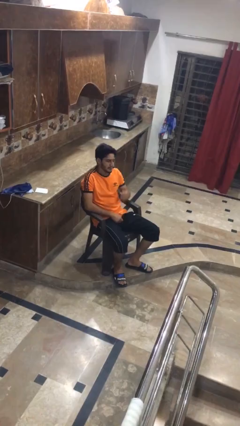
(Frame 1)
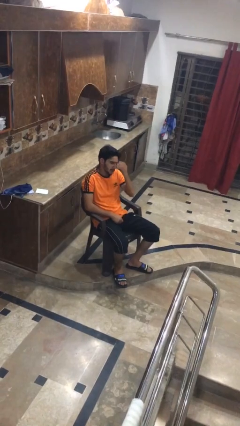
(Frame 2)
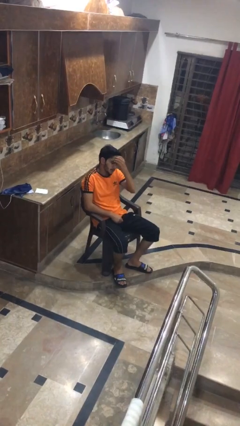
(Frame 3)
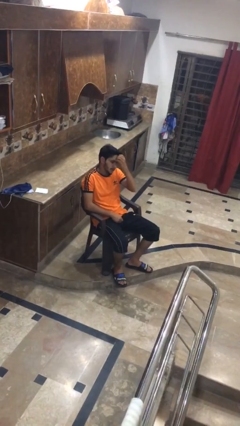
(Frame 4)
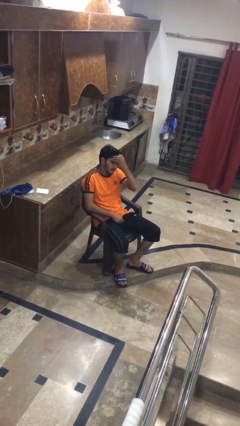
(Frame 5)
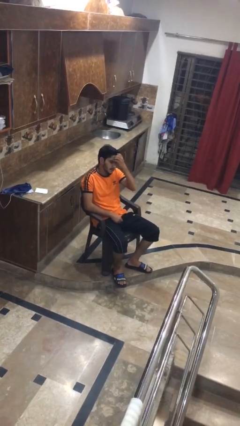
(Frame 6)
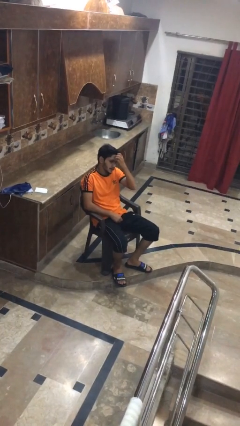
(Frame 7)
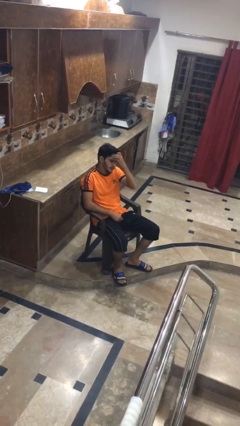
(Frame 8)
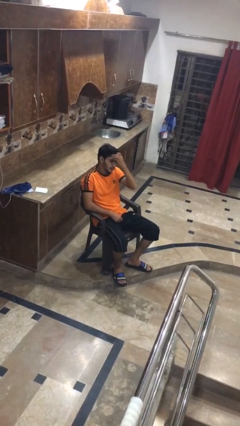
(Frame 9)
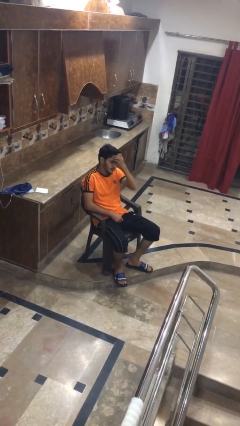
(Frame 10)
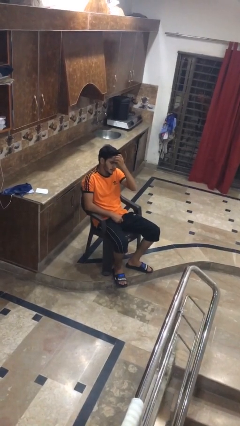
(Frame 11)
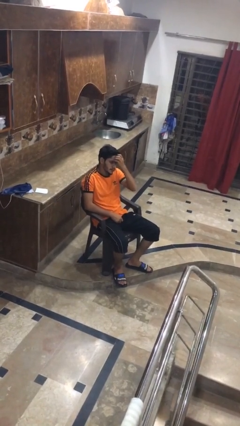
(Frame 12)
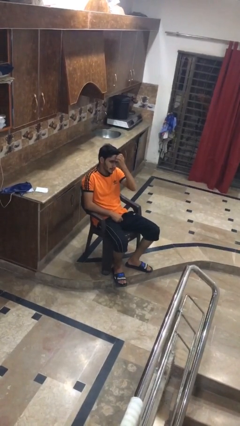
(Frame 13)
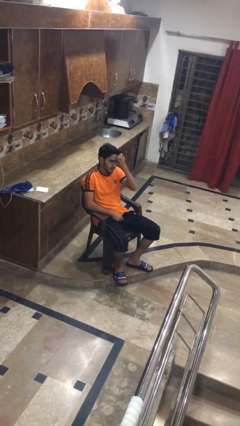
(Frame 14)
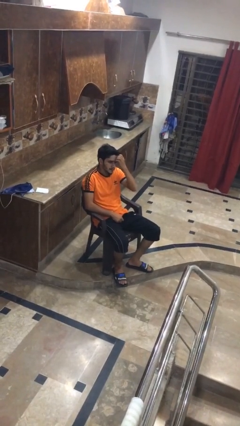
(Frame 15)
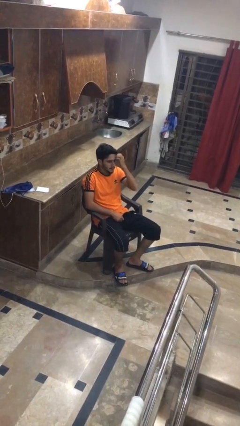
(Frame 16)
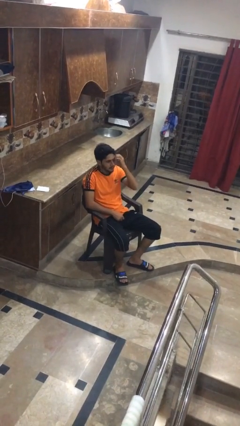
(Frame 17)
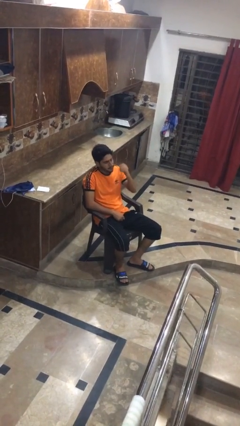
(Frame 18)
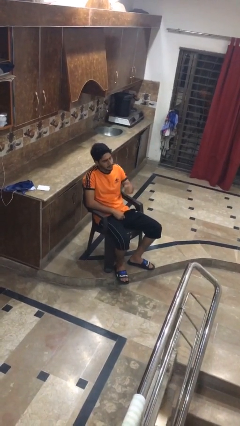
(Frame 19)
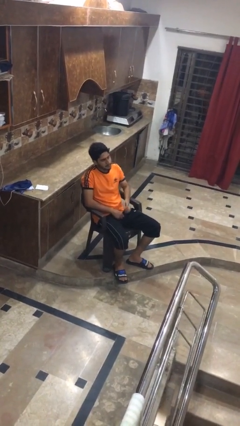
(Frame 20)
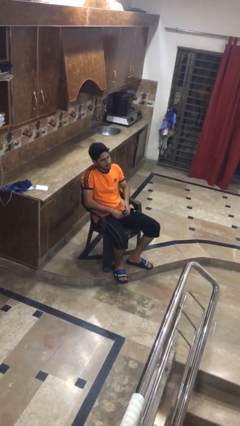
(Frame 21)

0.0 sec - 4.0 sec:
person scratches face

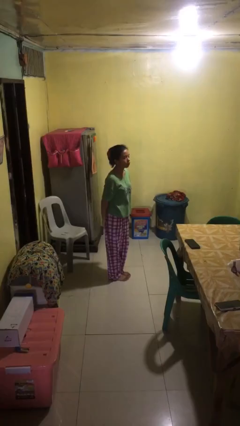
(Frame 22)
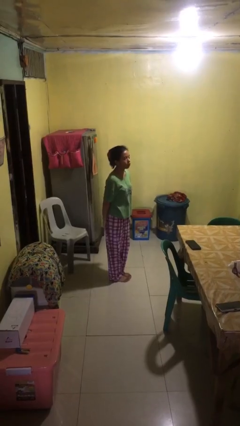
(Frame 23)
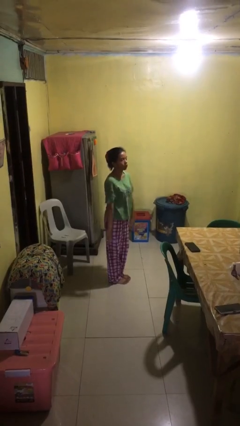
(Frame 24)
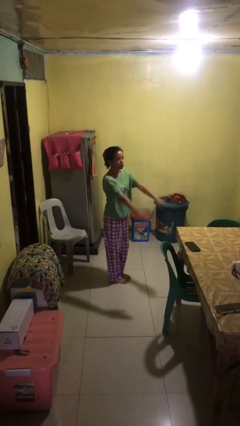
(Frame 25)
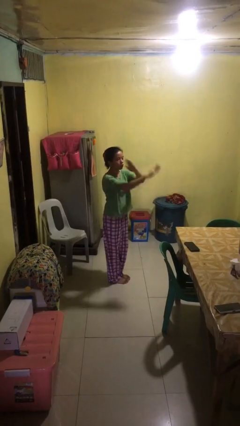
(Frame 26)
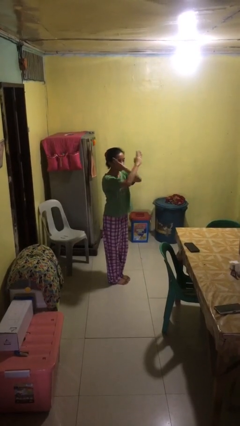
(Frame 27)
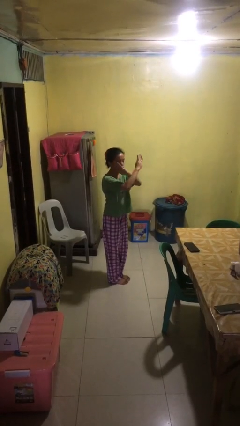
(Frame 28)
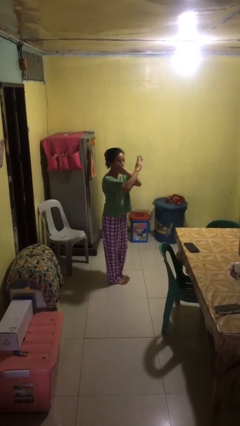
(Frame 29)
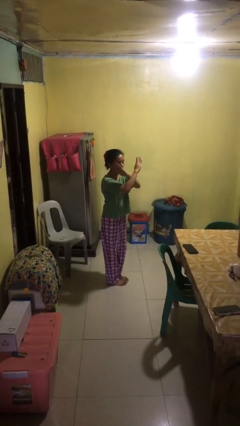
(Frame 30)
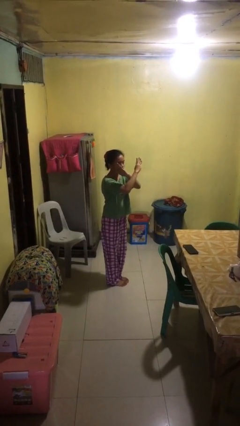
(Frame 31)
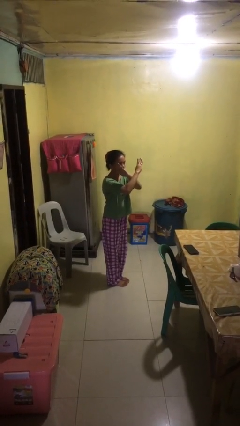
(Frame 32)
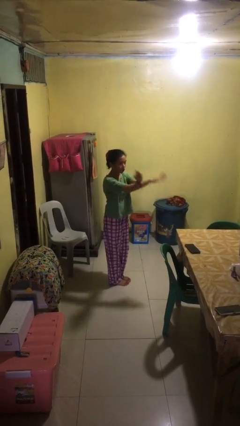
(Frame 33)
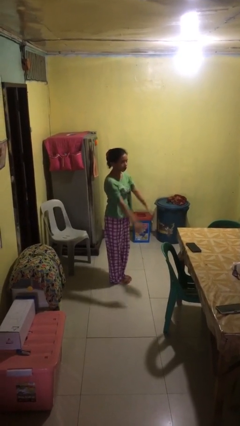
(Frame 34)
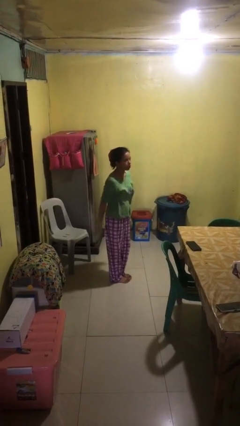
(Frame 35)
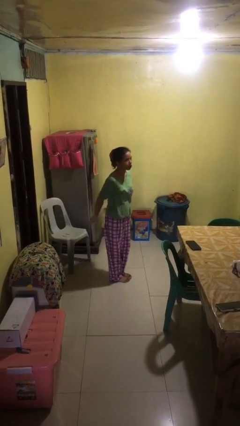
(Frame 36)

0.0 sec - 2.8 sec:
person gestures arms x

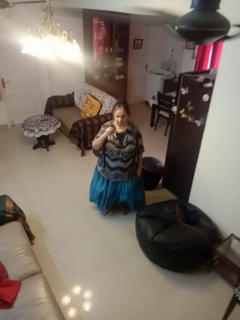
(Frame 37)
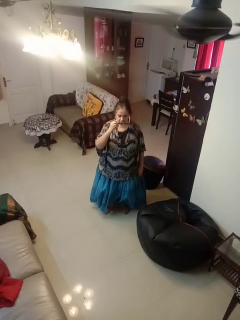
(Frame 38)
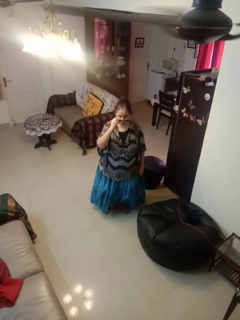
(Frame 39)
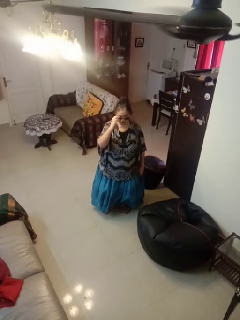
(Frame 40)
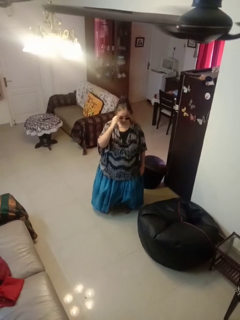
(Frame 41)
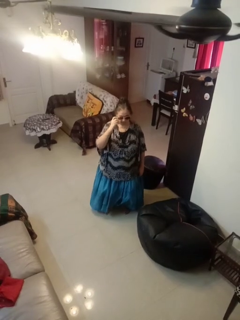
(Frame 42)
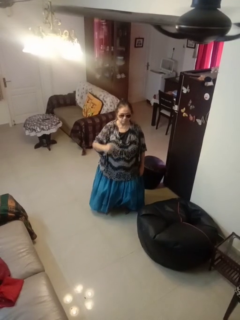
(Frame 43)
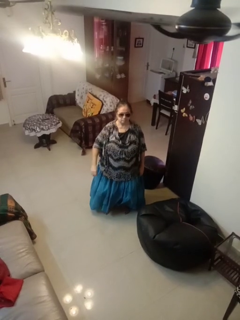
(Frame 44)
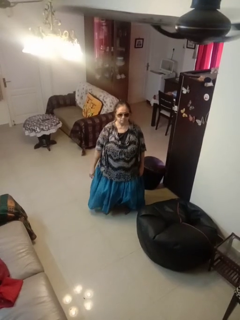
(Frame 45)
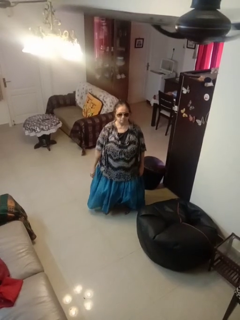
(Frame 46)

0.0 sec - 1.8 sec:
person puts on sunglasses

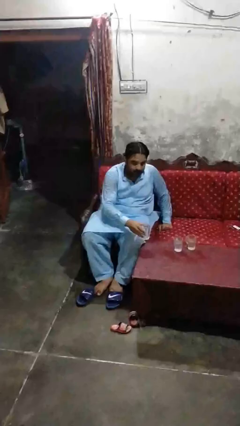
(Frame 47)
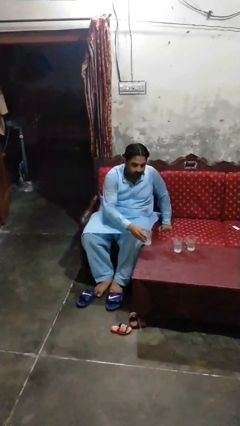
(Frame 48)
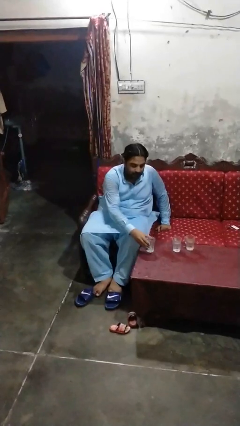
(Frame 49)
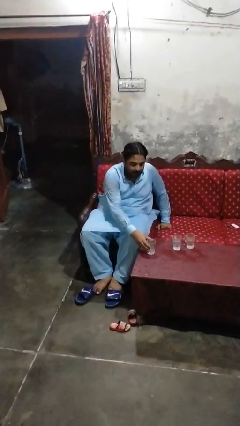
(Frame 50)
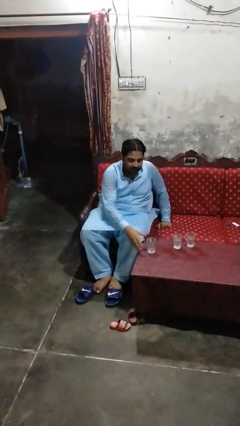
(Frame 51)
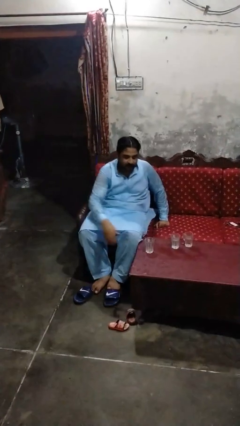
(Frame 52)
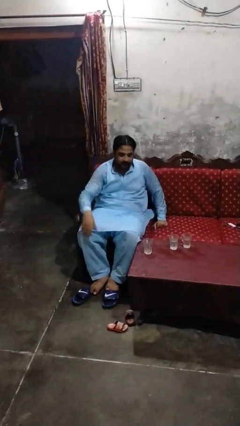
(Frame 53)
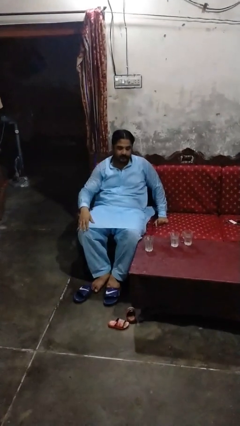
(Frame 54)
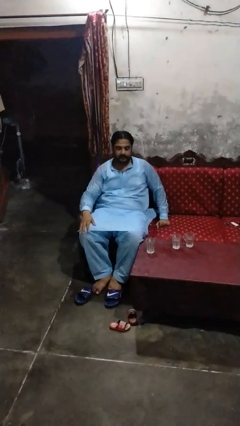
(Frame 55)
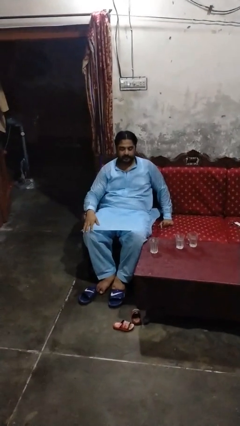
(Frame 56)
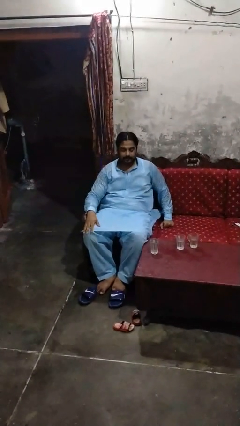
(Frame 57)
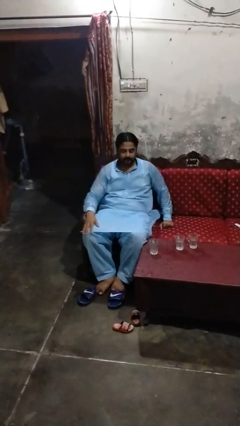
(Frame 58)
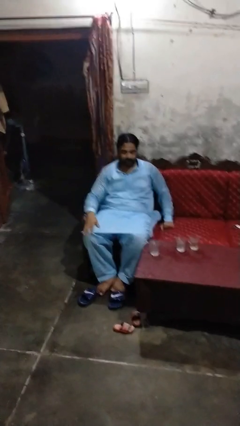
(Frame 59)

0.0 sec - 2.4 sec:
person puts down object on table

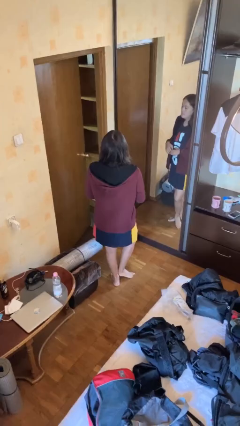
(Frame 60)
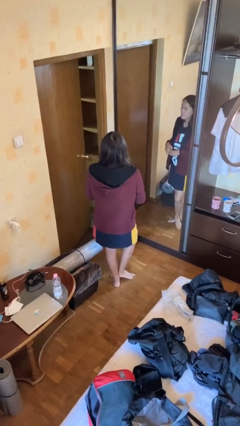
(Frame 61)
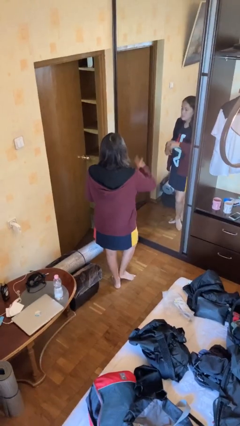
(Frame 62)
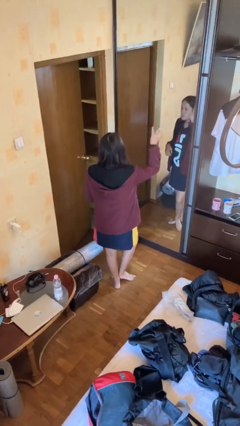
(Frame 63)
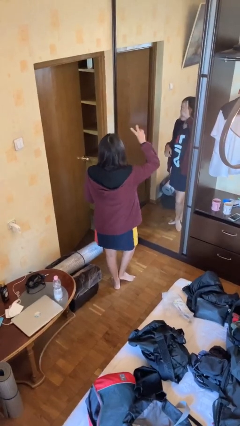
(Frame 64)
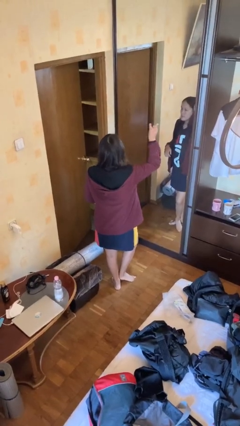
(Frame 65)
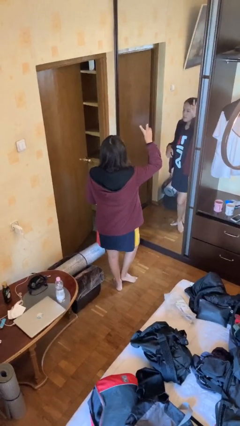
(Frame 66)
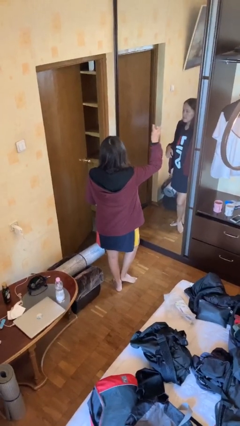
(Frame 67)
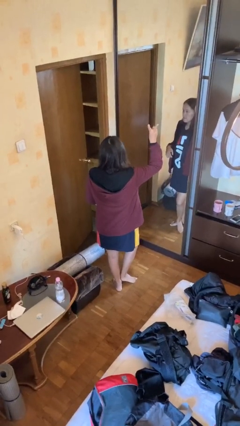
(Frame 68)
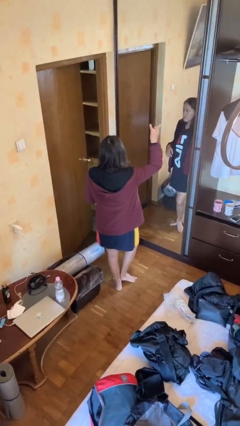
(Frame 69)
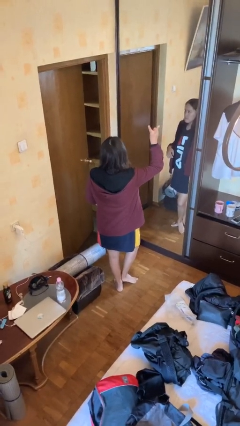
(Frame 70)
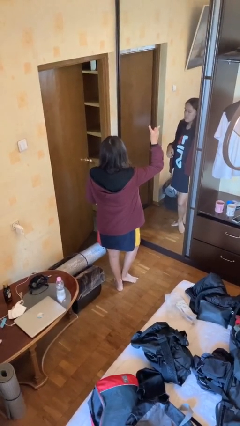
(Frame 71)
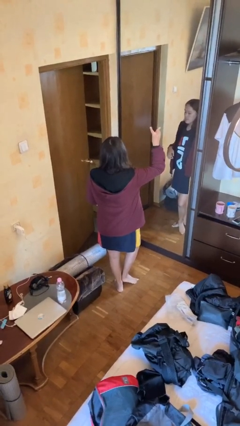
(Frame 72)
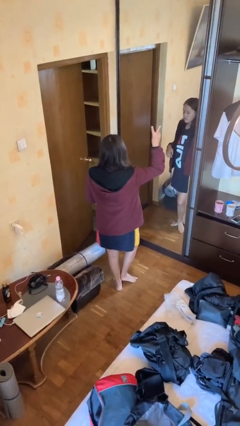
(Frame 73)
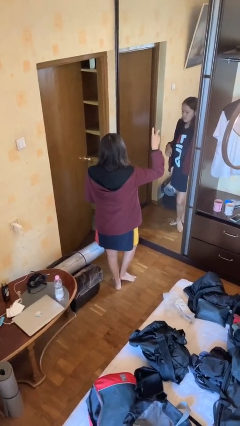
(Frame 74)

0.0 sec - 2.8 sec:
person gestures peace

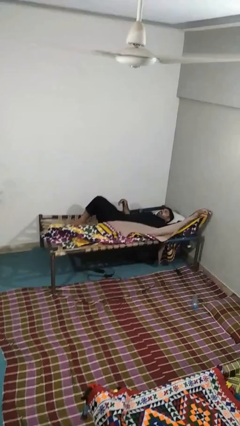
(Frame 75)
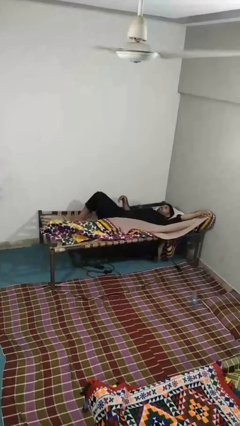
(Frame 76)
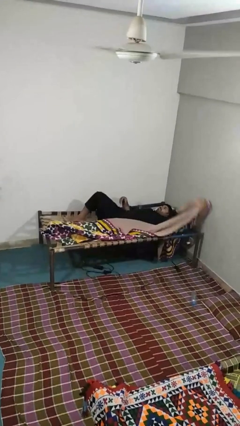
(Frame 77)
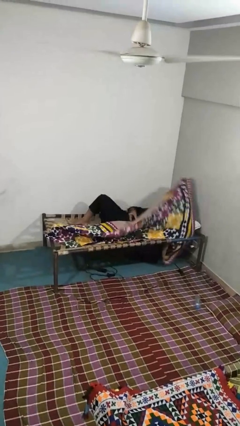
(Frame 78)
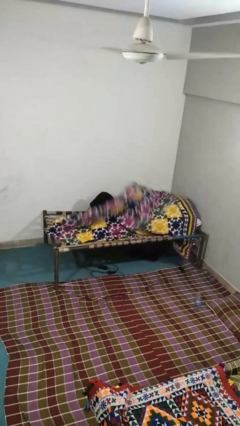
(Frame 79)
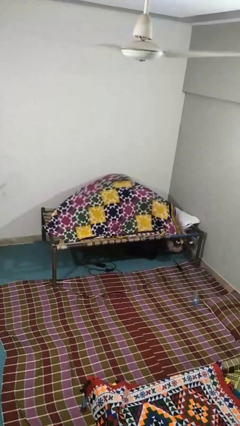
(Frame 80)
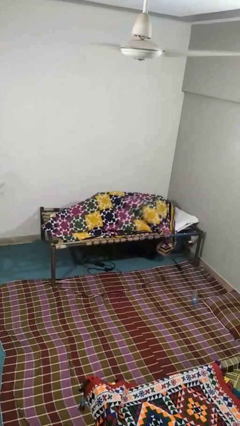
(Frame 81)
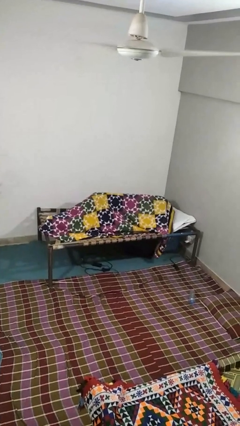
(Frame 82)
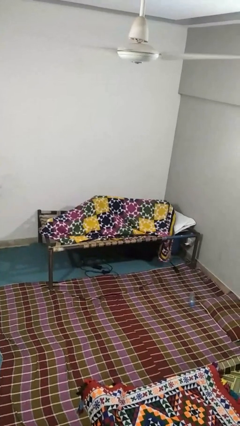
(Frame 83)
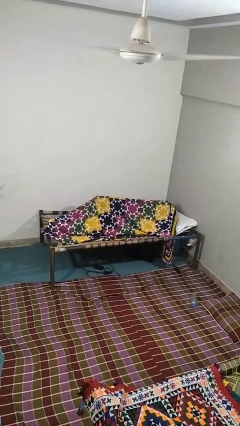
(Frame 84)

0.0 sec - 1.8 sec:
person covers with blanket

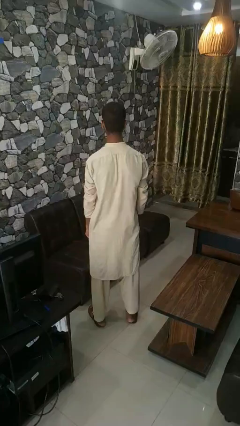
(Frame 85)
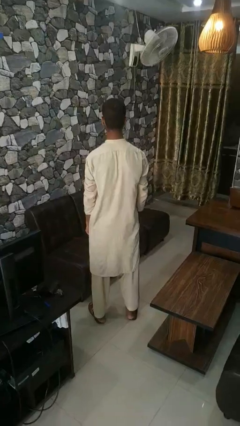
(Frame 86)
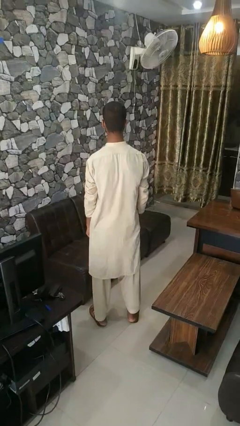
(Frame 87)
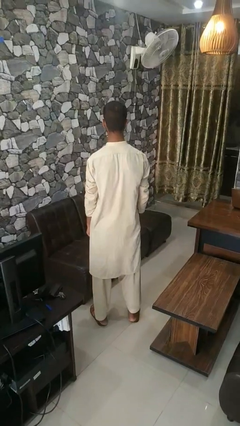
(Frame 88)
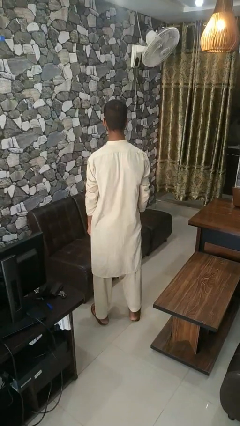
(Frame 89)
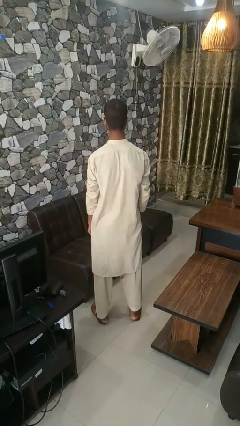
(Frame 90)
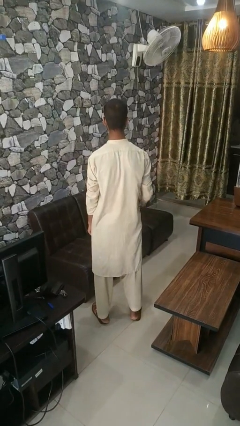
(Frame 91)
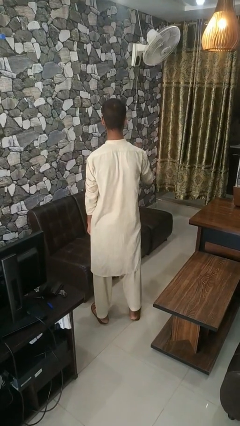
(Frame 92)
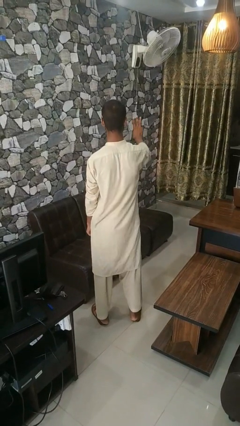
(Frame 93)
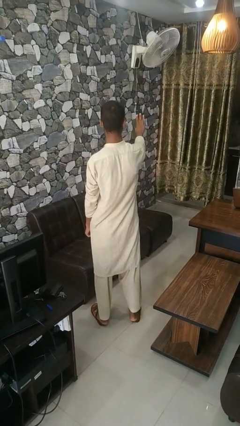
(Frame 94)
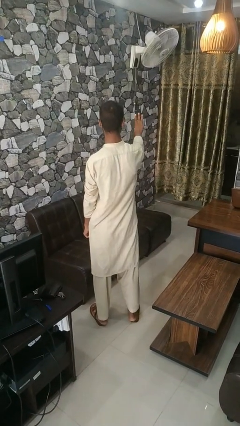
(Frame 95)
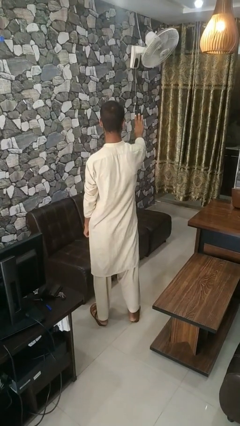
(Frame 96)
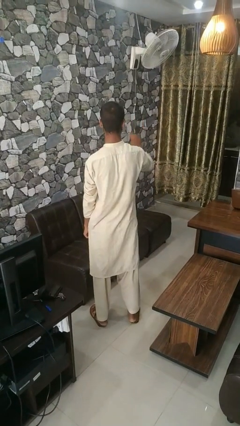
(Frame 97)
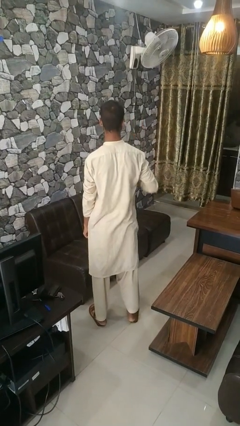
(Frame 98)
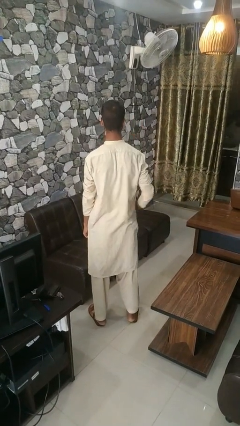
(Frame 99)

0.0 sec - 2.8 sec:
person gestures number three
